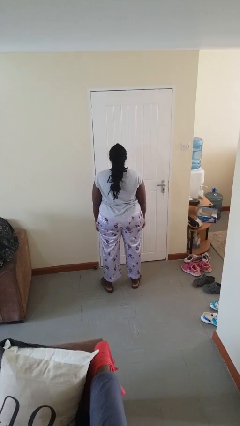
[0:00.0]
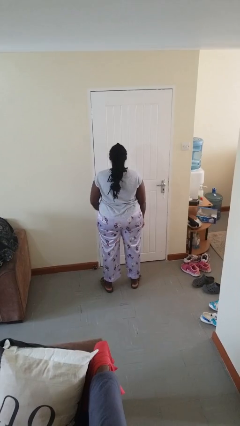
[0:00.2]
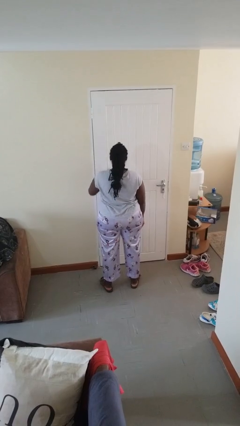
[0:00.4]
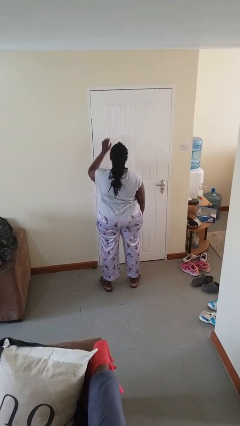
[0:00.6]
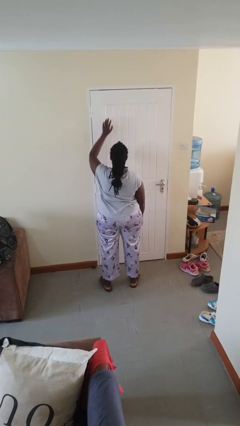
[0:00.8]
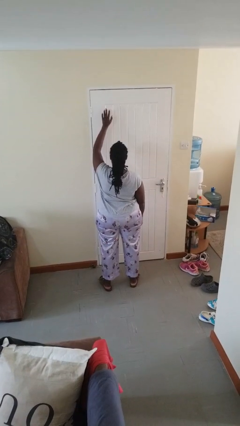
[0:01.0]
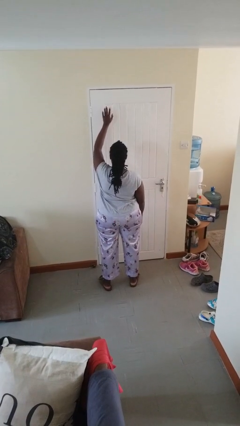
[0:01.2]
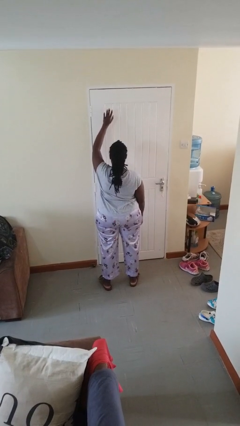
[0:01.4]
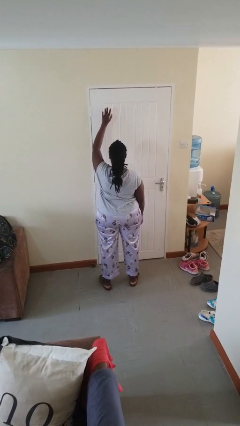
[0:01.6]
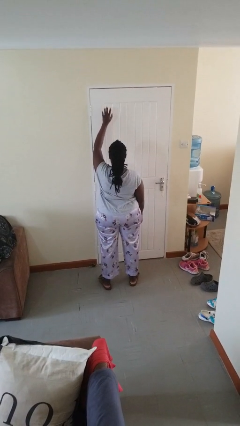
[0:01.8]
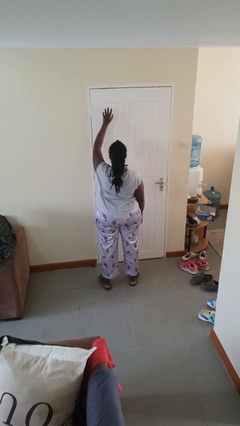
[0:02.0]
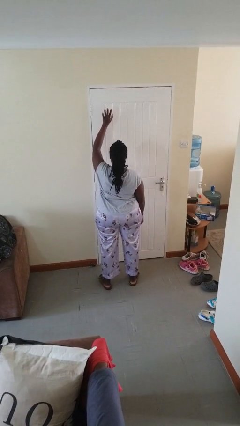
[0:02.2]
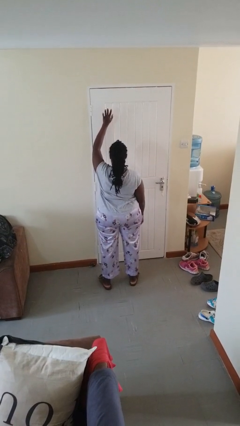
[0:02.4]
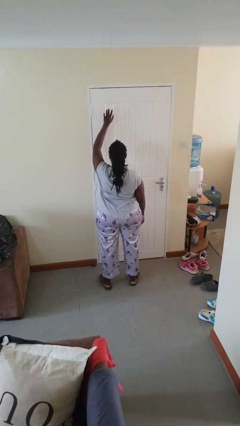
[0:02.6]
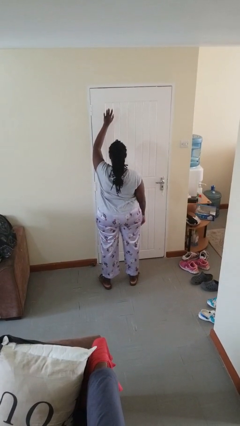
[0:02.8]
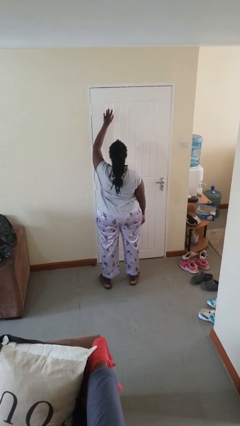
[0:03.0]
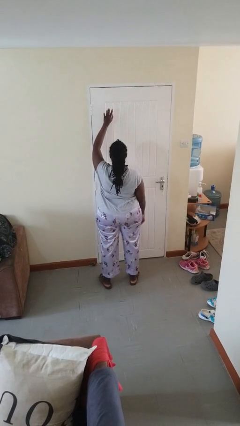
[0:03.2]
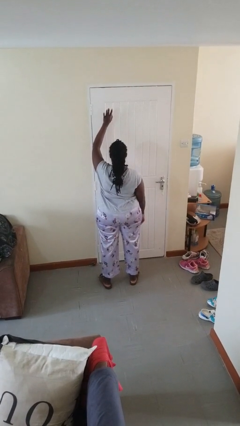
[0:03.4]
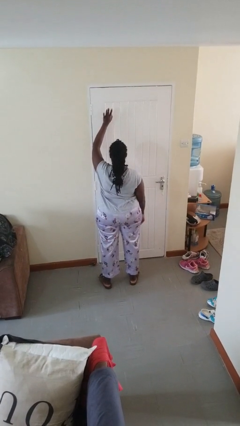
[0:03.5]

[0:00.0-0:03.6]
person gestures raise hand

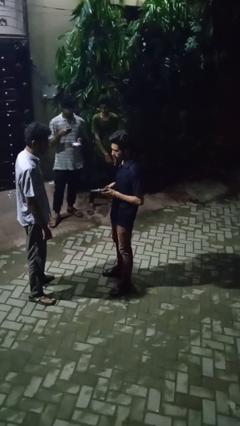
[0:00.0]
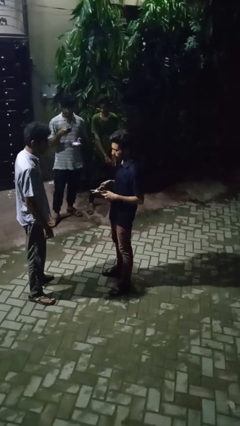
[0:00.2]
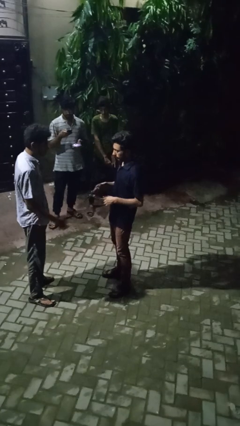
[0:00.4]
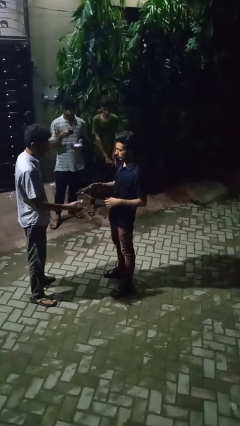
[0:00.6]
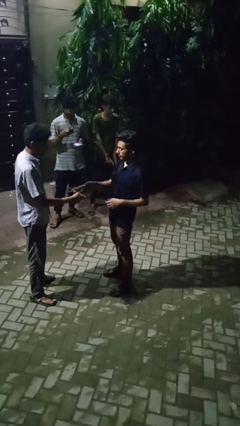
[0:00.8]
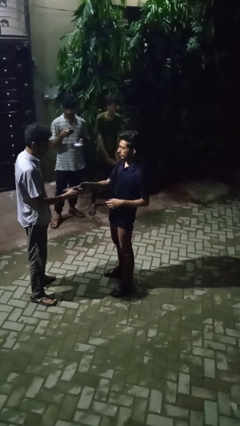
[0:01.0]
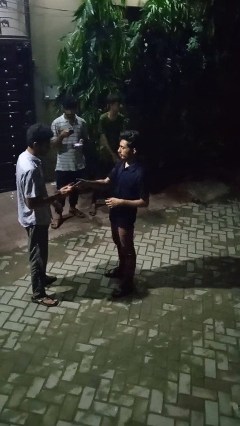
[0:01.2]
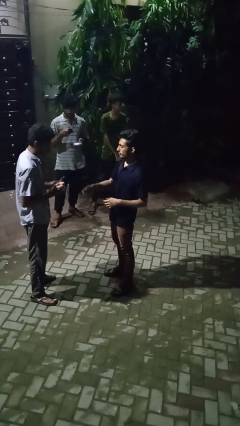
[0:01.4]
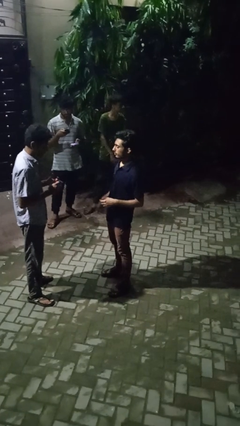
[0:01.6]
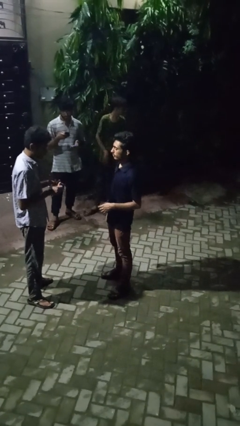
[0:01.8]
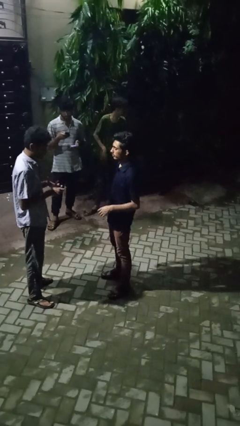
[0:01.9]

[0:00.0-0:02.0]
person transfers object to person

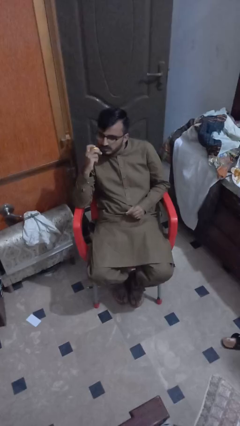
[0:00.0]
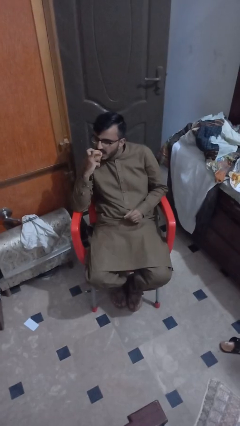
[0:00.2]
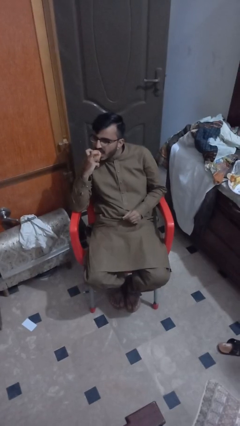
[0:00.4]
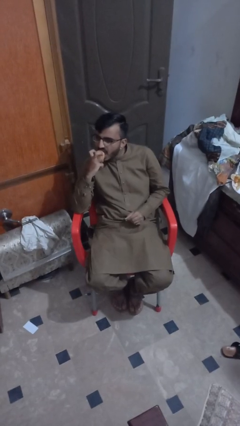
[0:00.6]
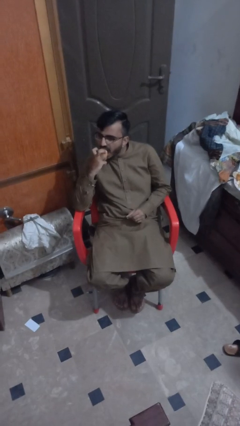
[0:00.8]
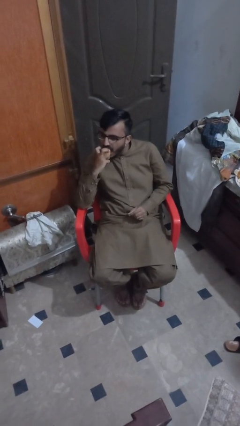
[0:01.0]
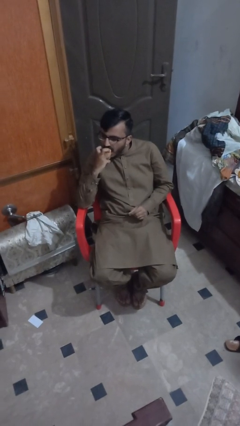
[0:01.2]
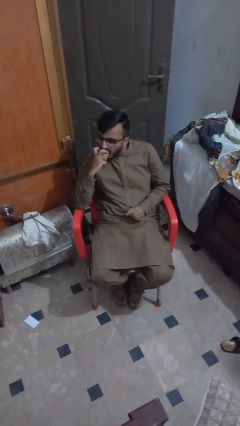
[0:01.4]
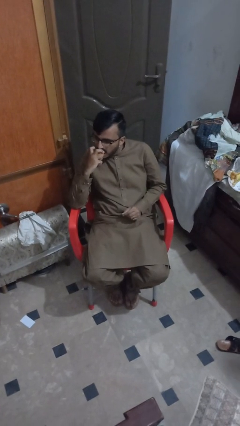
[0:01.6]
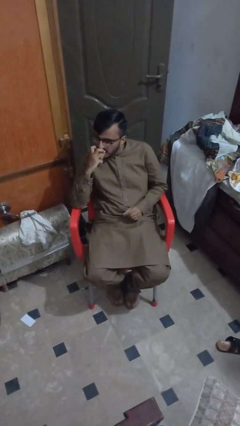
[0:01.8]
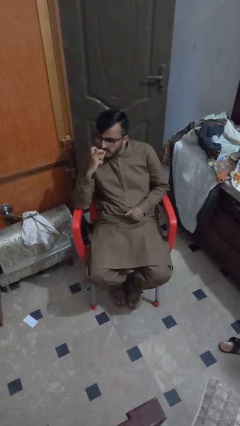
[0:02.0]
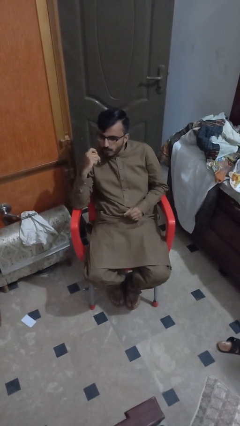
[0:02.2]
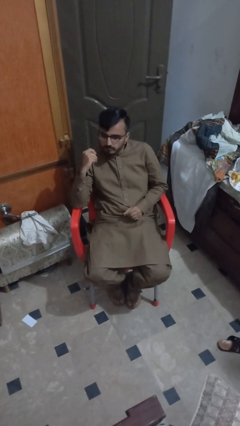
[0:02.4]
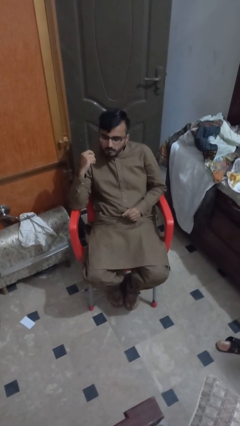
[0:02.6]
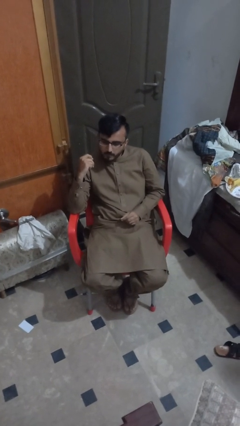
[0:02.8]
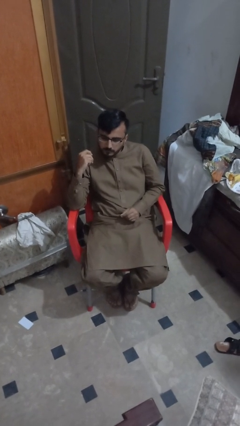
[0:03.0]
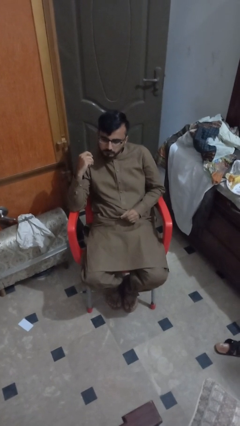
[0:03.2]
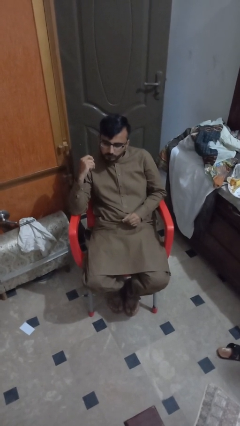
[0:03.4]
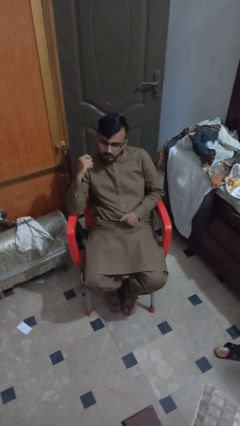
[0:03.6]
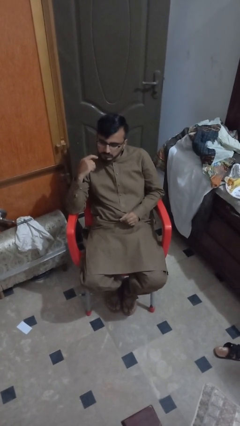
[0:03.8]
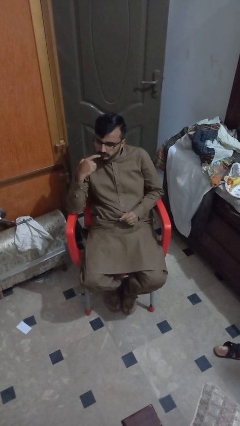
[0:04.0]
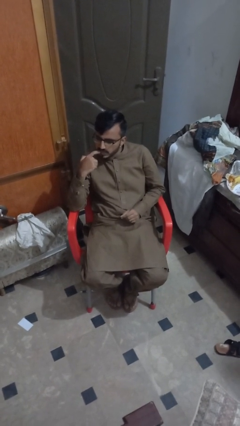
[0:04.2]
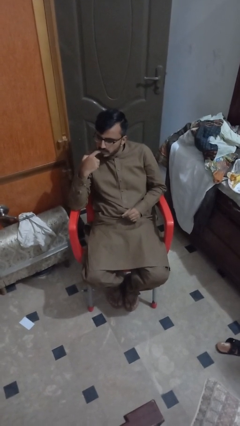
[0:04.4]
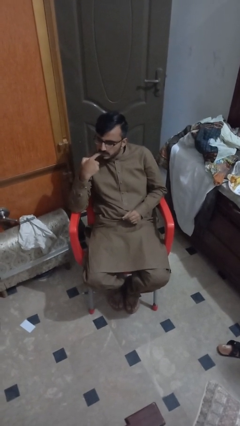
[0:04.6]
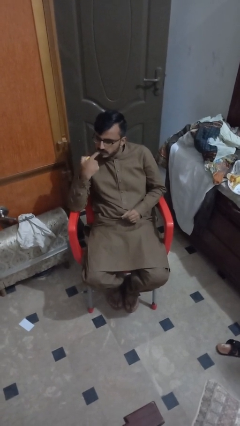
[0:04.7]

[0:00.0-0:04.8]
person eats apple

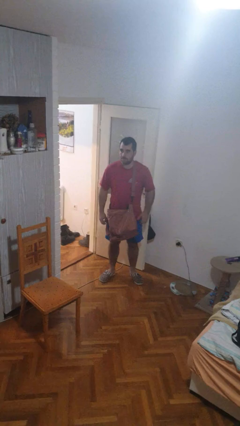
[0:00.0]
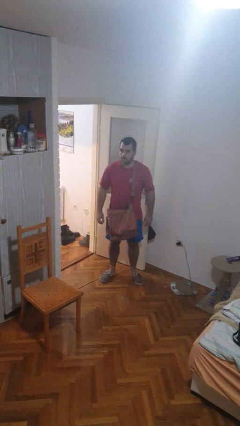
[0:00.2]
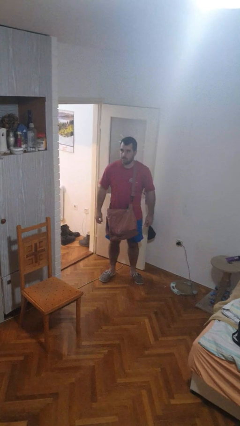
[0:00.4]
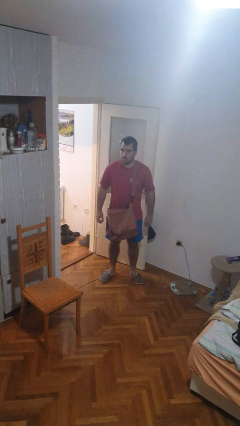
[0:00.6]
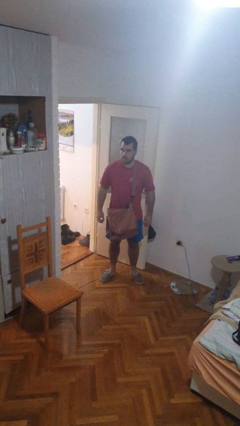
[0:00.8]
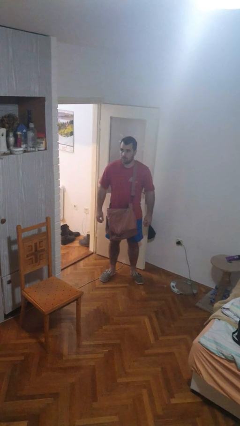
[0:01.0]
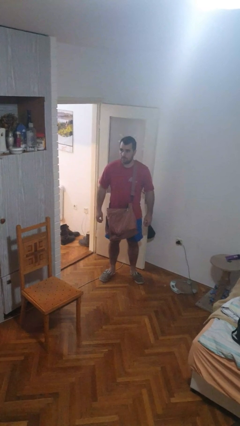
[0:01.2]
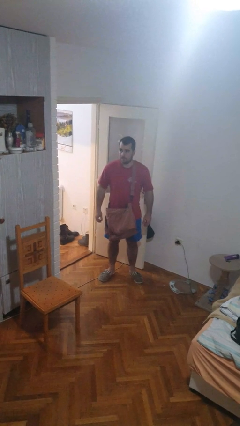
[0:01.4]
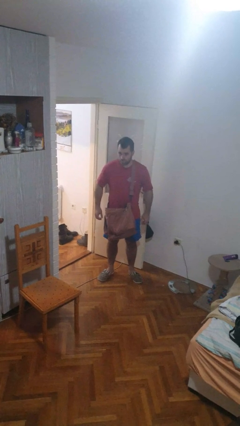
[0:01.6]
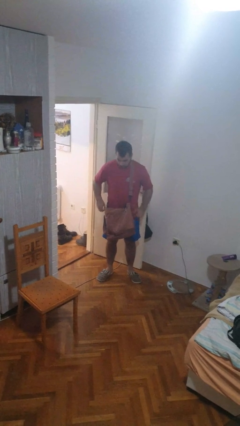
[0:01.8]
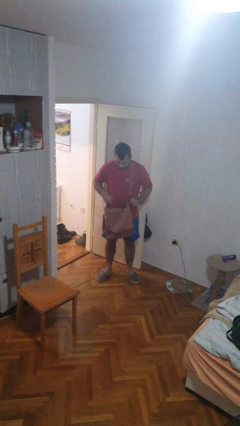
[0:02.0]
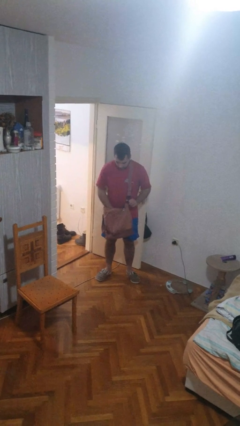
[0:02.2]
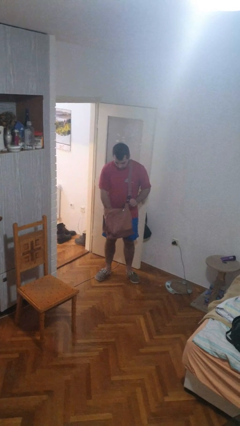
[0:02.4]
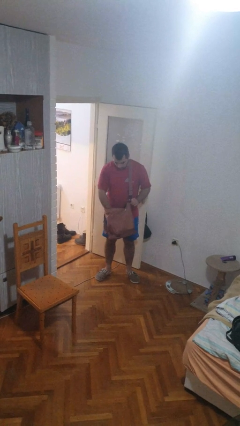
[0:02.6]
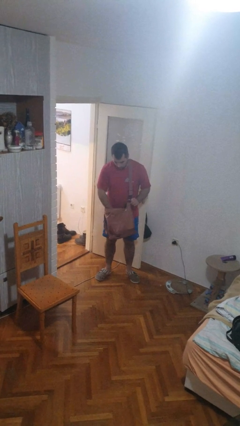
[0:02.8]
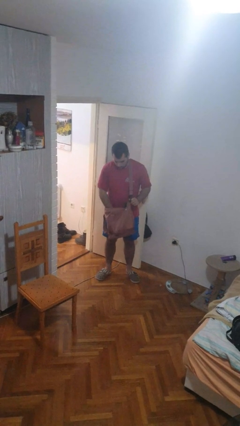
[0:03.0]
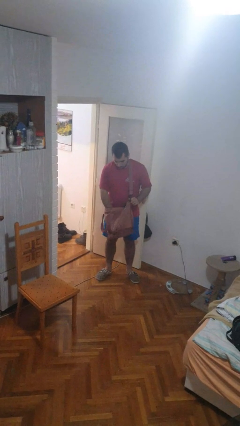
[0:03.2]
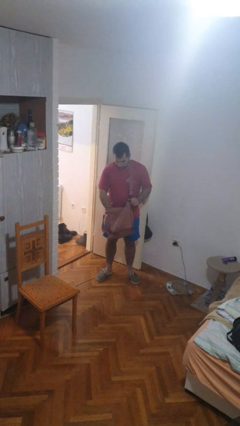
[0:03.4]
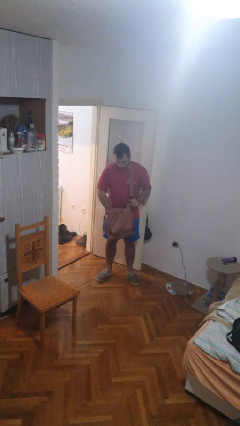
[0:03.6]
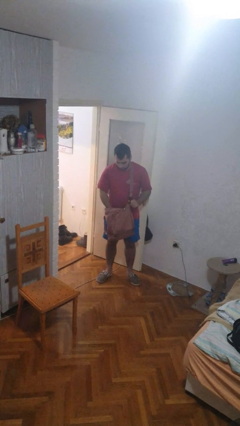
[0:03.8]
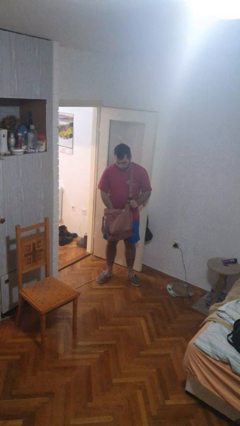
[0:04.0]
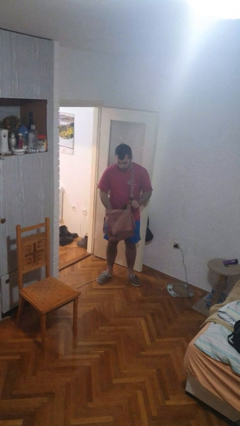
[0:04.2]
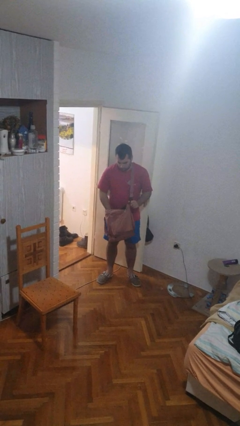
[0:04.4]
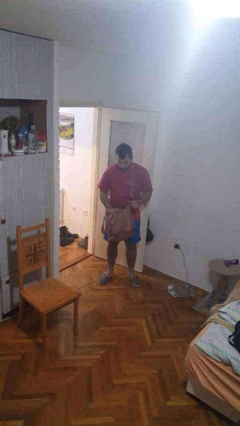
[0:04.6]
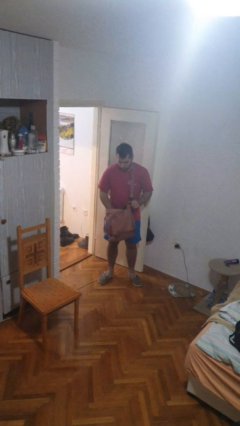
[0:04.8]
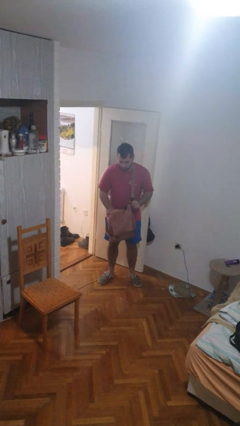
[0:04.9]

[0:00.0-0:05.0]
person searches in purse

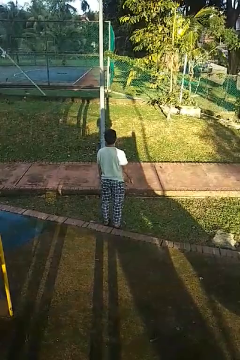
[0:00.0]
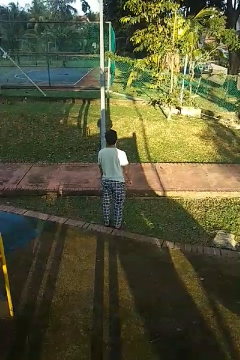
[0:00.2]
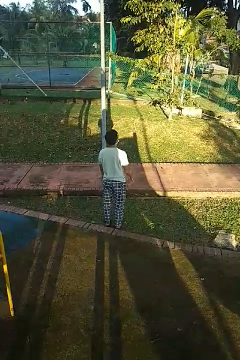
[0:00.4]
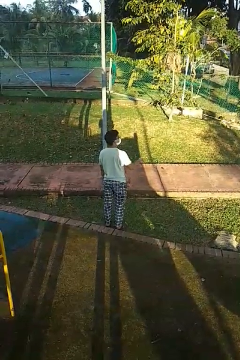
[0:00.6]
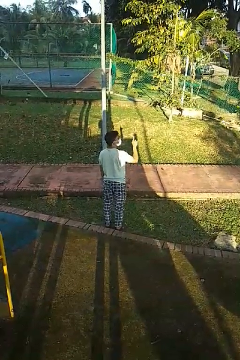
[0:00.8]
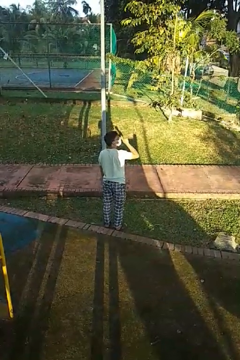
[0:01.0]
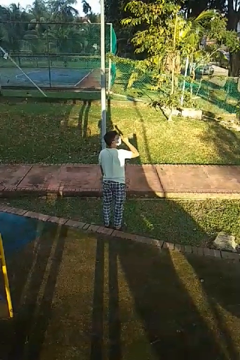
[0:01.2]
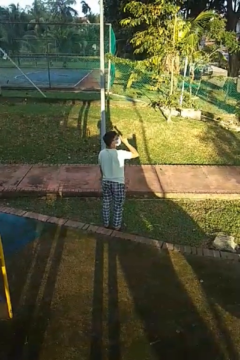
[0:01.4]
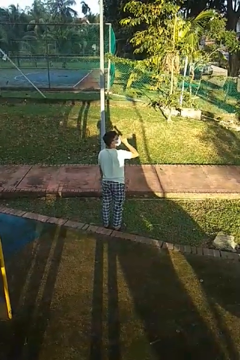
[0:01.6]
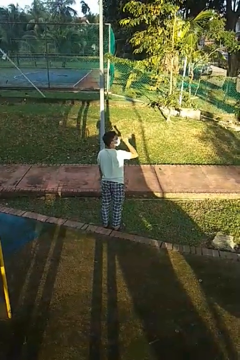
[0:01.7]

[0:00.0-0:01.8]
person gestures be quiet

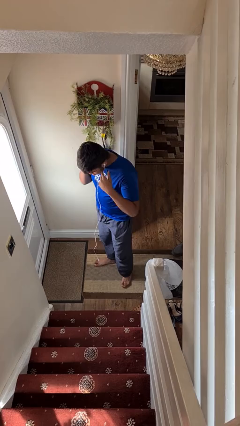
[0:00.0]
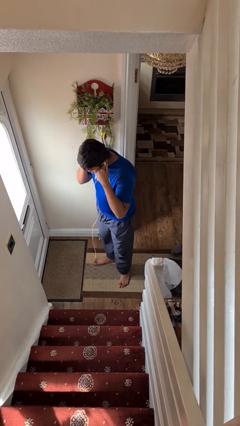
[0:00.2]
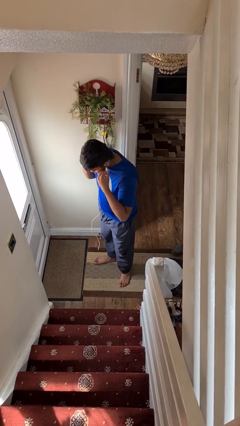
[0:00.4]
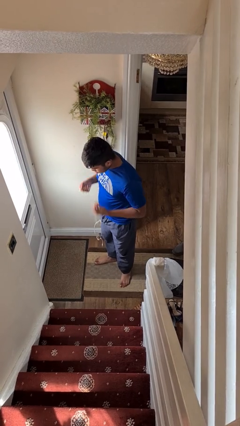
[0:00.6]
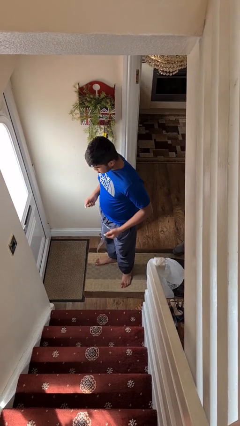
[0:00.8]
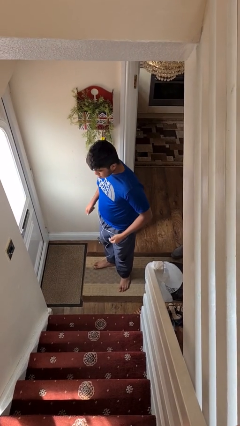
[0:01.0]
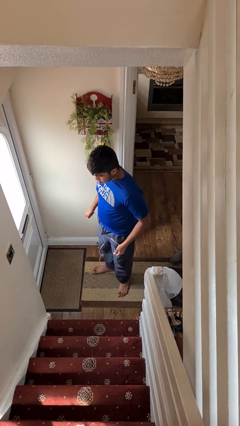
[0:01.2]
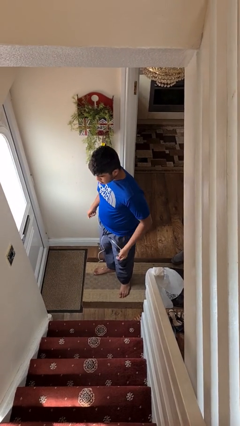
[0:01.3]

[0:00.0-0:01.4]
person takes off headphones
